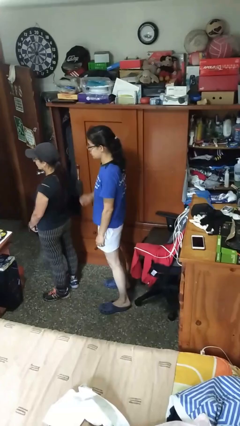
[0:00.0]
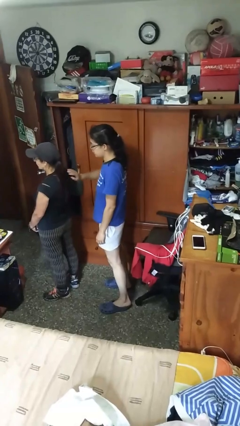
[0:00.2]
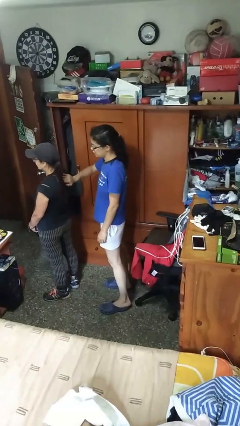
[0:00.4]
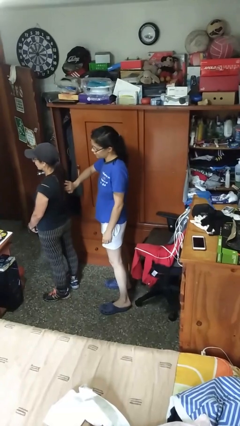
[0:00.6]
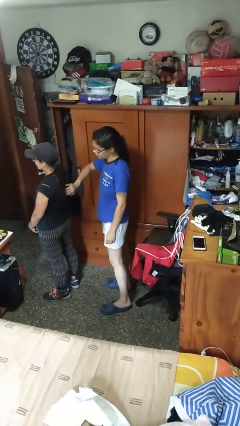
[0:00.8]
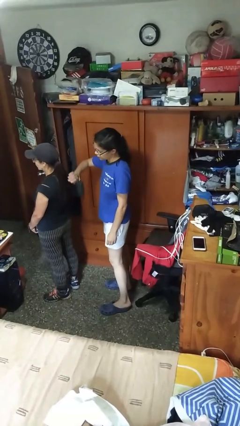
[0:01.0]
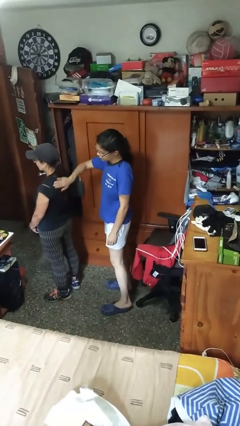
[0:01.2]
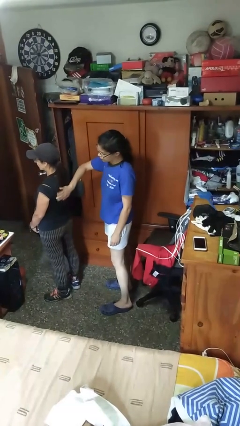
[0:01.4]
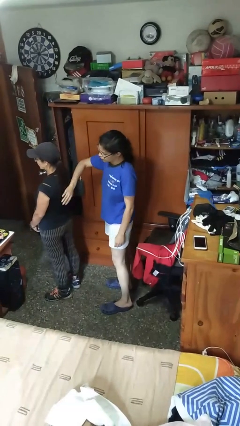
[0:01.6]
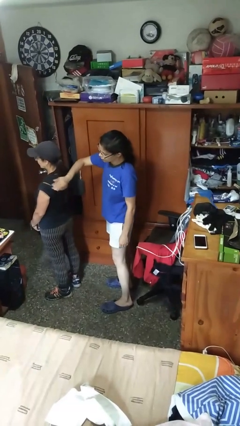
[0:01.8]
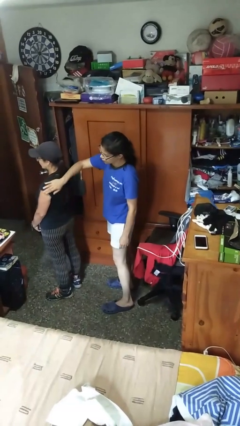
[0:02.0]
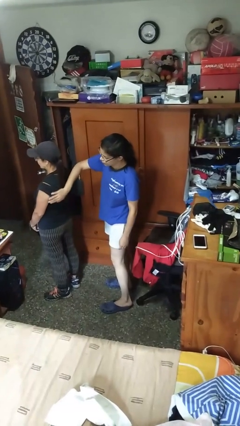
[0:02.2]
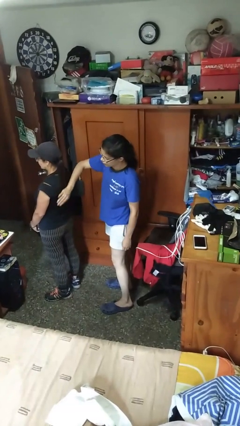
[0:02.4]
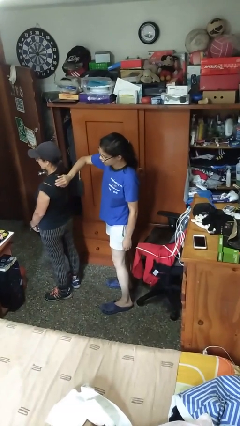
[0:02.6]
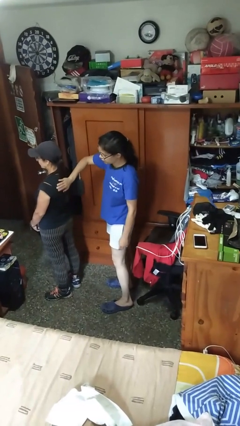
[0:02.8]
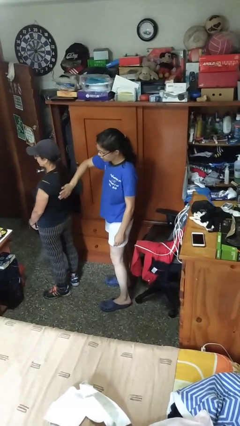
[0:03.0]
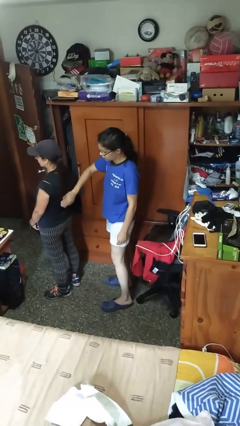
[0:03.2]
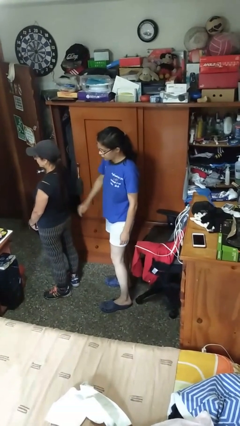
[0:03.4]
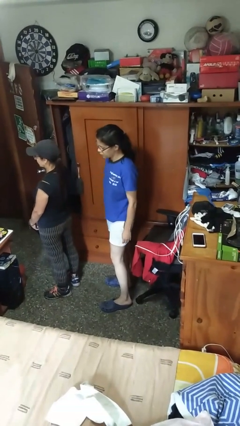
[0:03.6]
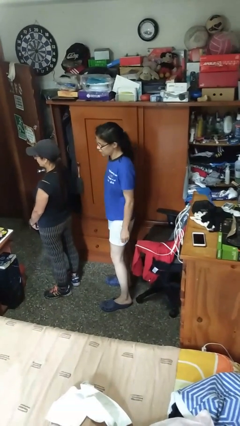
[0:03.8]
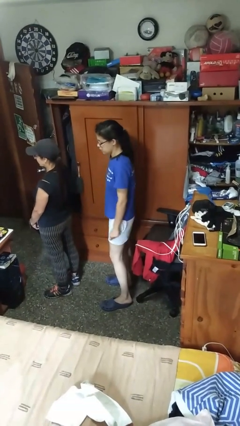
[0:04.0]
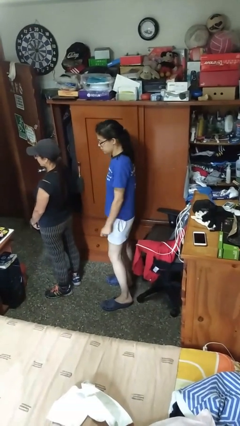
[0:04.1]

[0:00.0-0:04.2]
person touches back of person

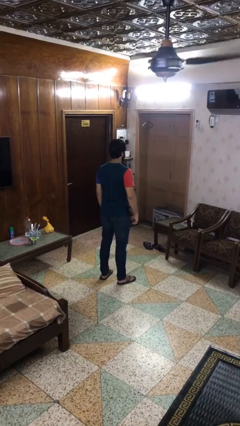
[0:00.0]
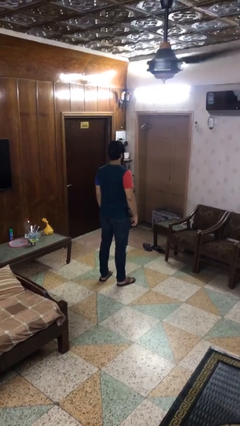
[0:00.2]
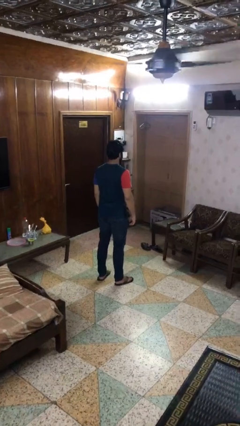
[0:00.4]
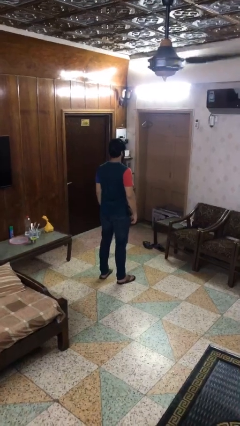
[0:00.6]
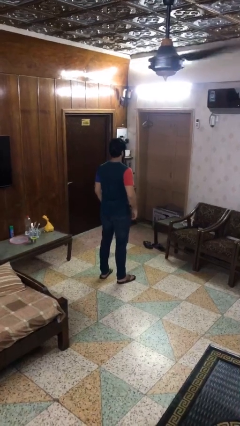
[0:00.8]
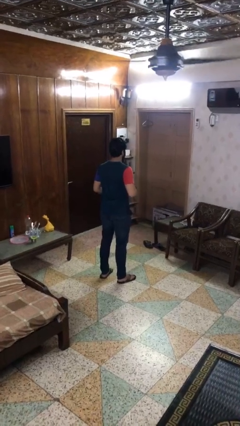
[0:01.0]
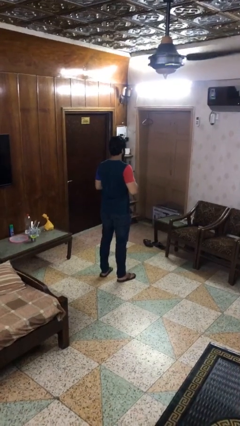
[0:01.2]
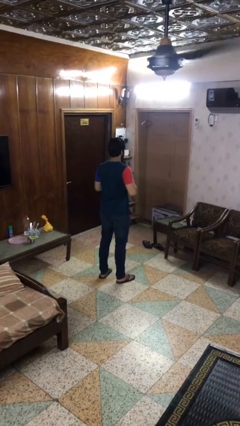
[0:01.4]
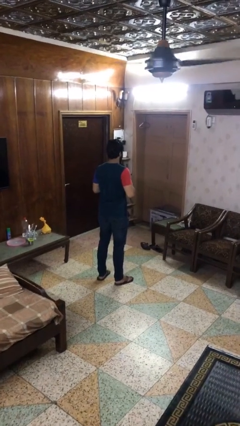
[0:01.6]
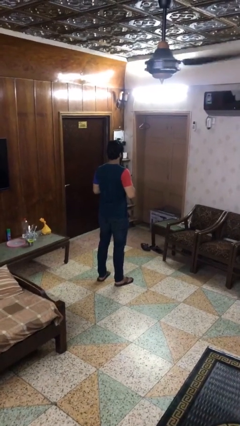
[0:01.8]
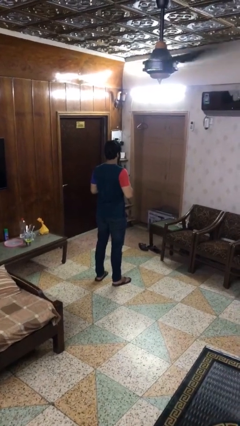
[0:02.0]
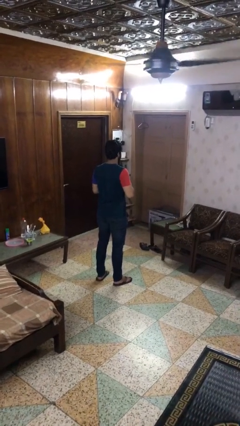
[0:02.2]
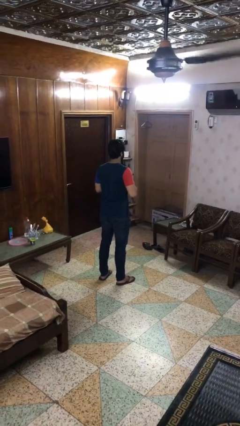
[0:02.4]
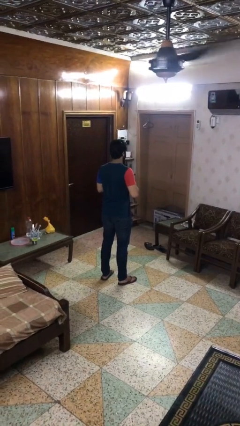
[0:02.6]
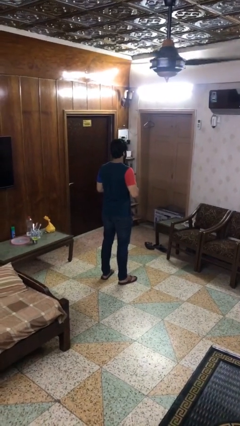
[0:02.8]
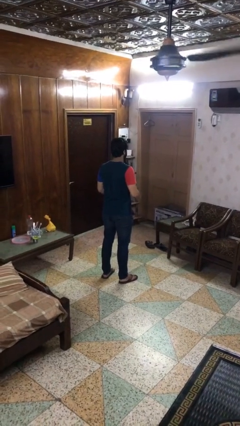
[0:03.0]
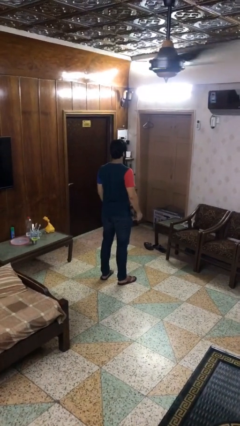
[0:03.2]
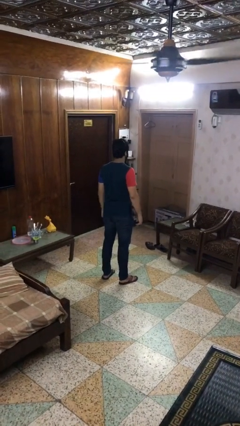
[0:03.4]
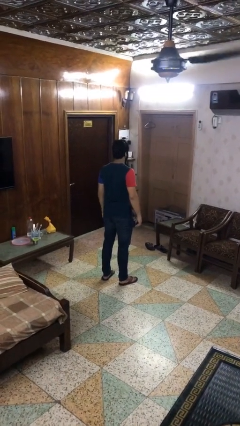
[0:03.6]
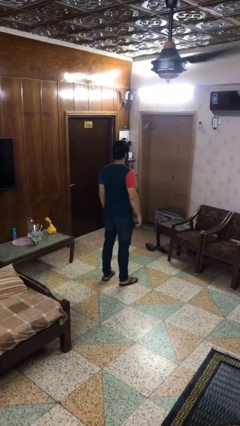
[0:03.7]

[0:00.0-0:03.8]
person unbuttons shirt

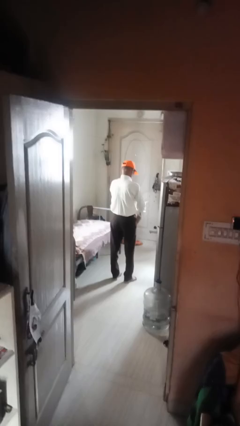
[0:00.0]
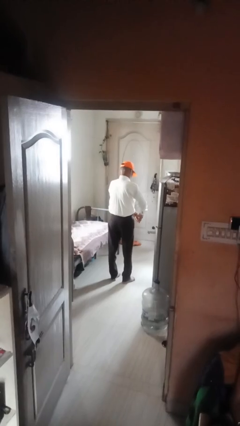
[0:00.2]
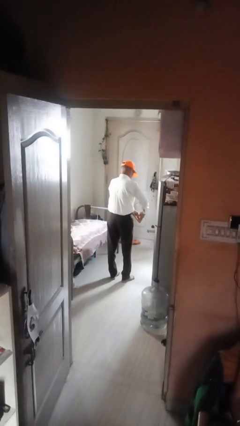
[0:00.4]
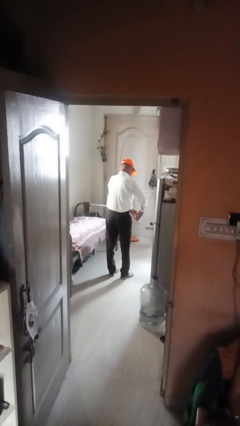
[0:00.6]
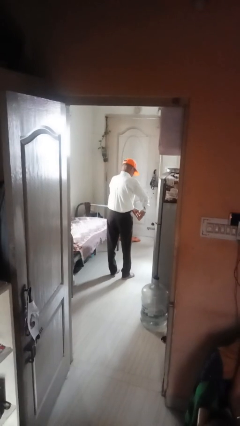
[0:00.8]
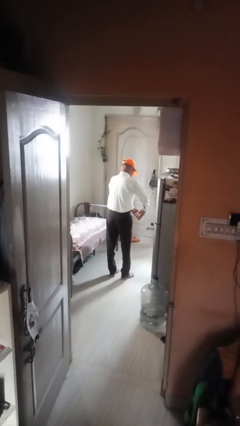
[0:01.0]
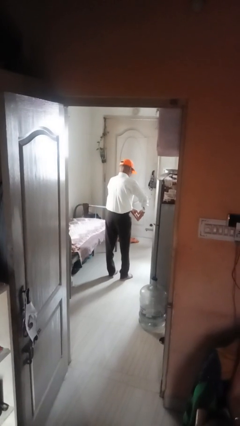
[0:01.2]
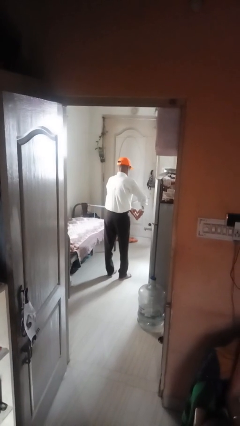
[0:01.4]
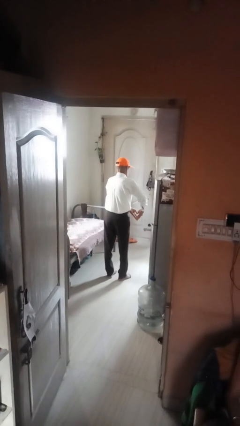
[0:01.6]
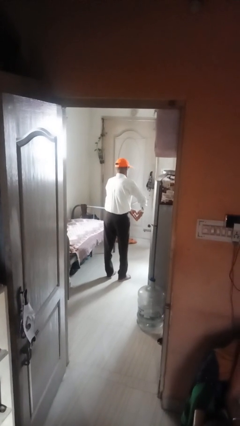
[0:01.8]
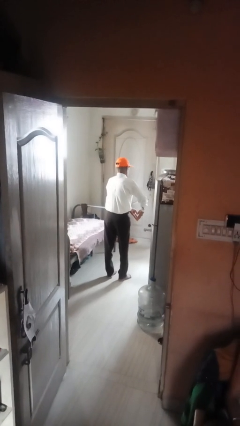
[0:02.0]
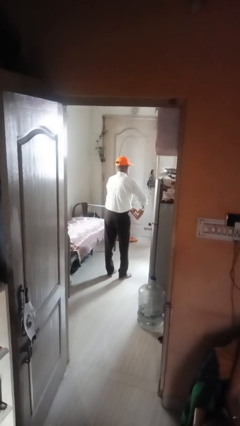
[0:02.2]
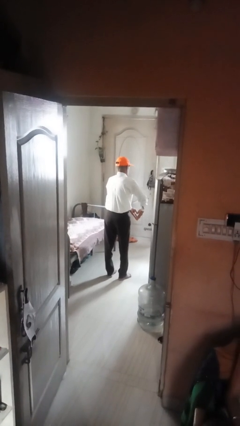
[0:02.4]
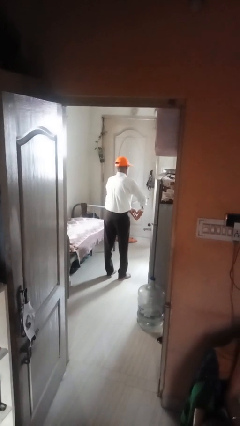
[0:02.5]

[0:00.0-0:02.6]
person gestures heart

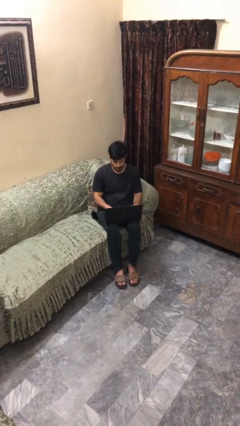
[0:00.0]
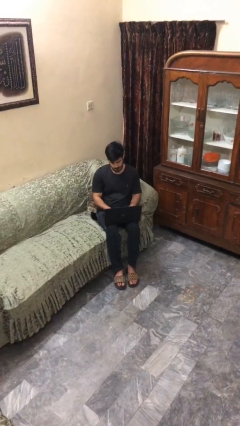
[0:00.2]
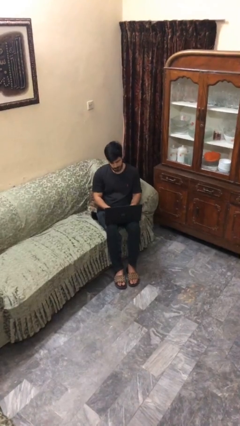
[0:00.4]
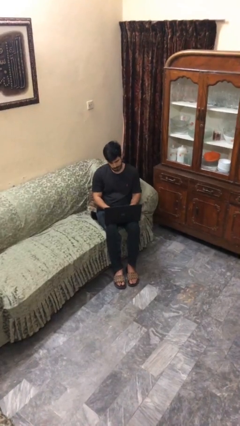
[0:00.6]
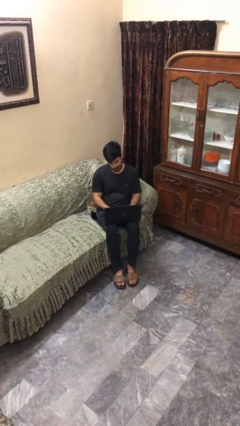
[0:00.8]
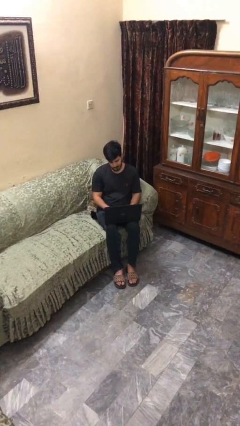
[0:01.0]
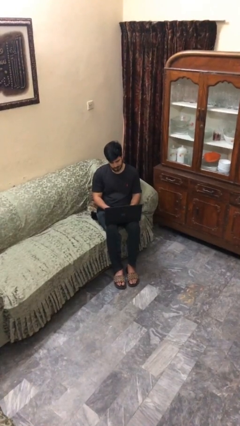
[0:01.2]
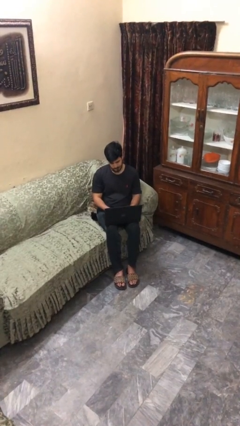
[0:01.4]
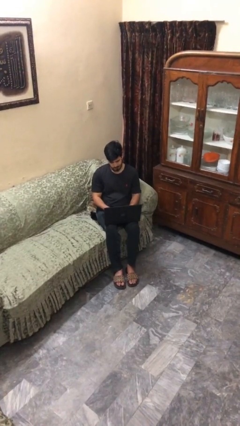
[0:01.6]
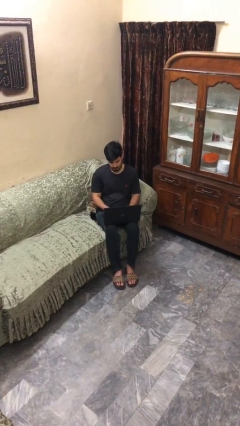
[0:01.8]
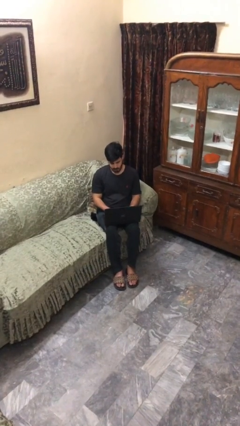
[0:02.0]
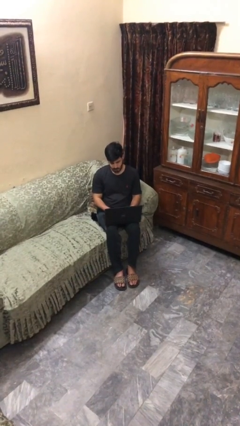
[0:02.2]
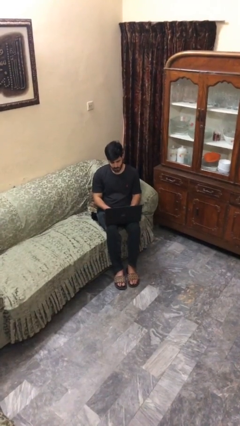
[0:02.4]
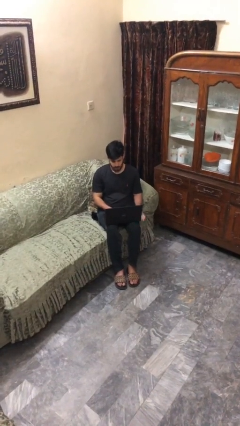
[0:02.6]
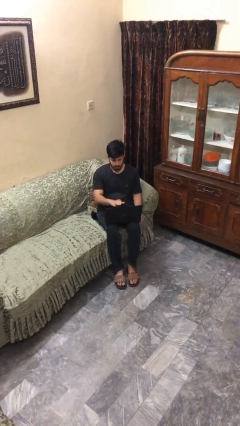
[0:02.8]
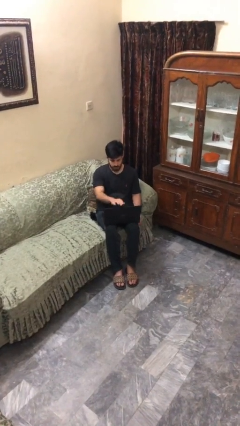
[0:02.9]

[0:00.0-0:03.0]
person interacts with laptop

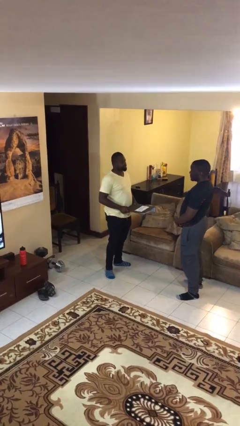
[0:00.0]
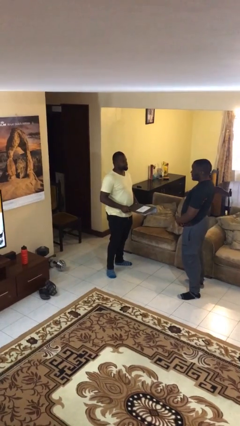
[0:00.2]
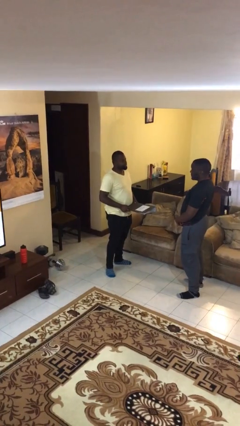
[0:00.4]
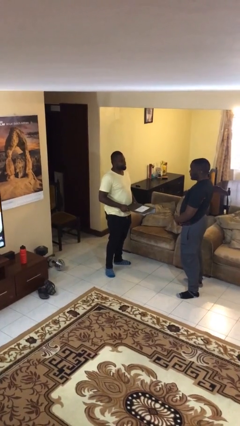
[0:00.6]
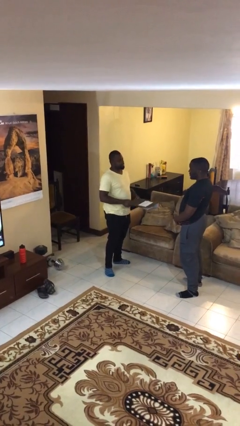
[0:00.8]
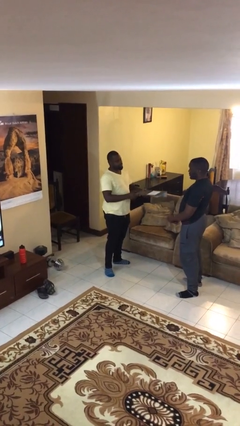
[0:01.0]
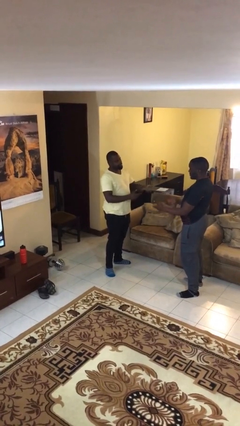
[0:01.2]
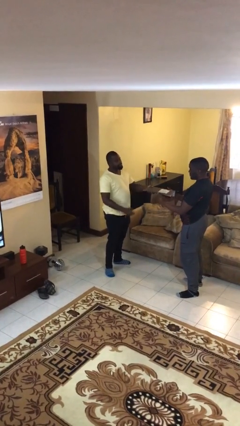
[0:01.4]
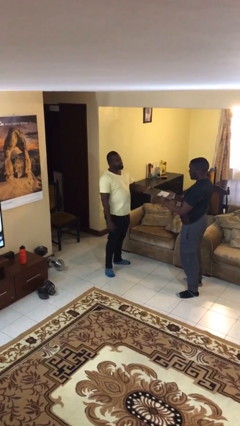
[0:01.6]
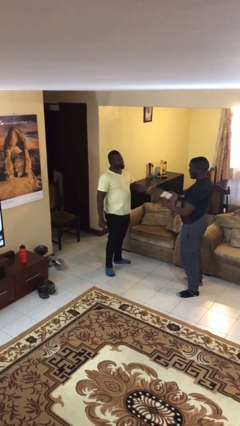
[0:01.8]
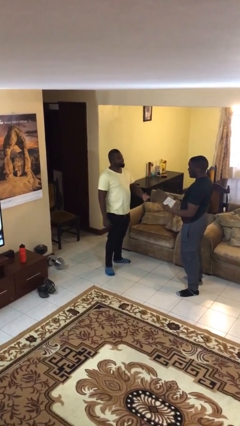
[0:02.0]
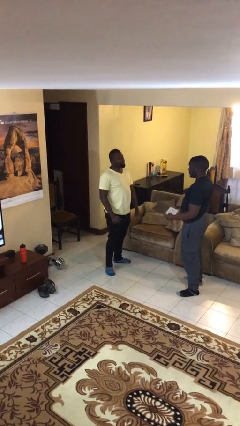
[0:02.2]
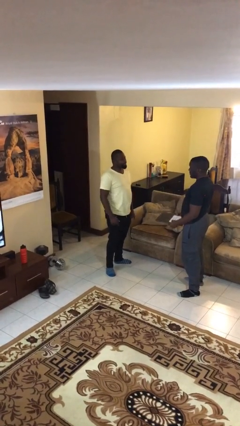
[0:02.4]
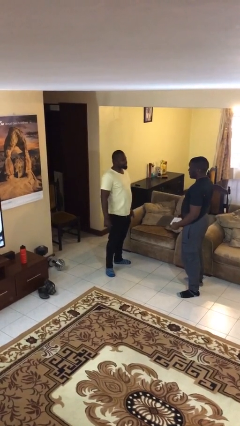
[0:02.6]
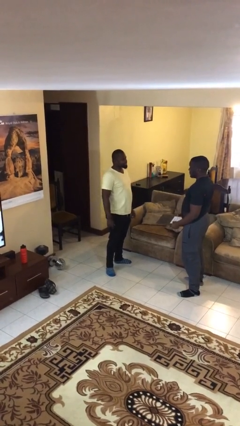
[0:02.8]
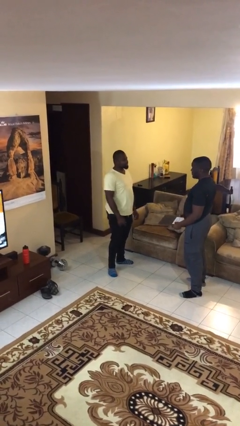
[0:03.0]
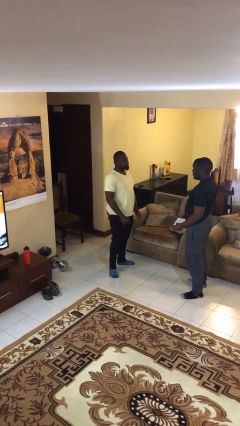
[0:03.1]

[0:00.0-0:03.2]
person transfers object to person

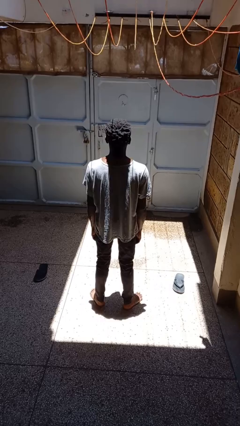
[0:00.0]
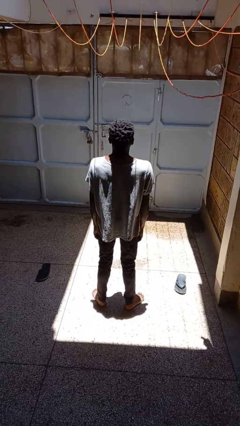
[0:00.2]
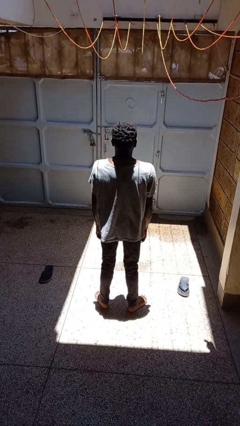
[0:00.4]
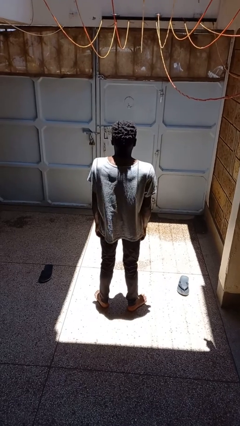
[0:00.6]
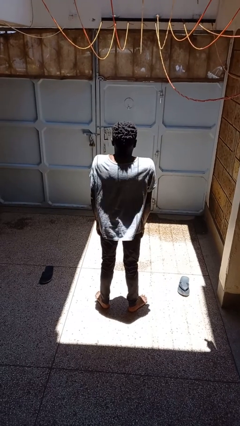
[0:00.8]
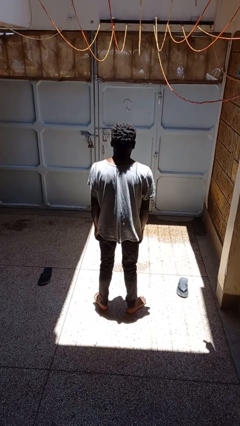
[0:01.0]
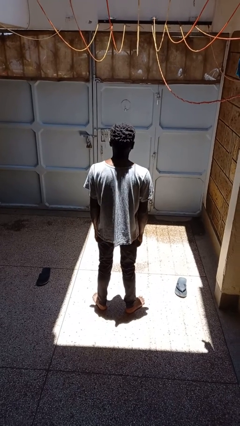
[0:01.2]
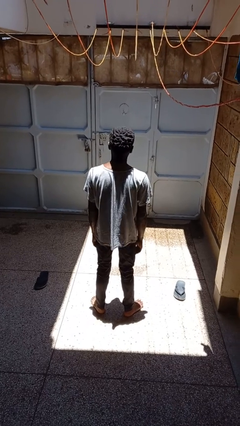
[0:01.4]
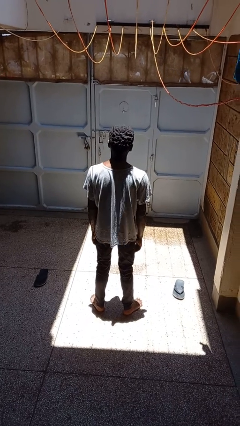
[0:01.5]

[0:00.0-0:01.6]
person shrugs
